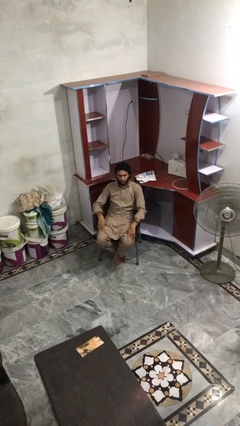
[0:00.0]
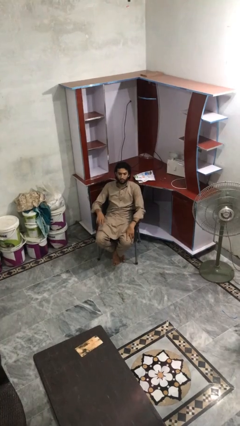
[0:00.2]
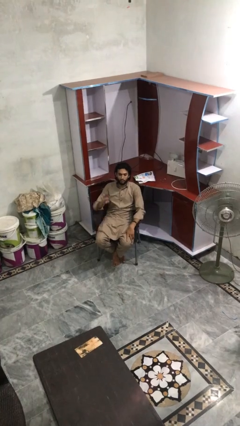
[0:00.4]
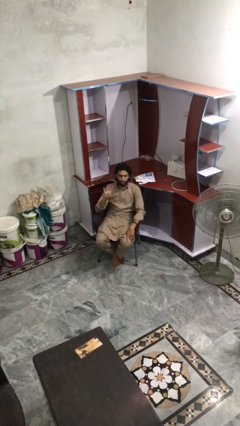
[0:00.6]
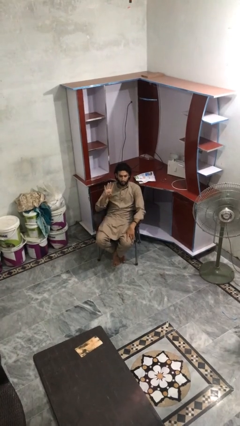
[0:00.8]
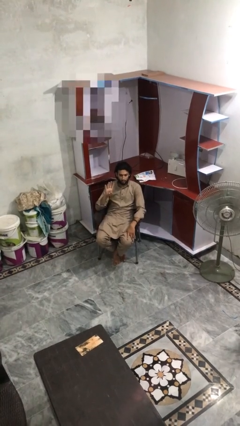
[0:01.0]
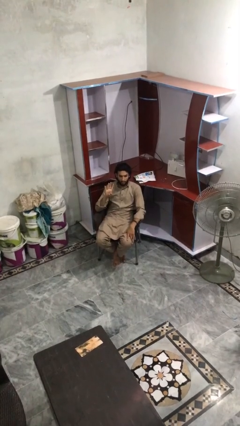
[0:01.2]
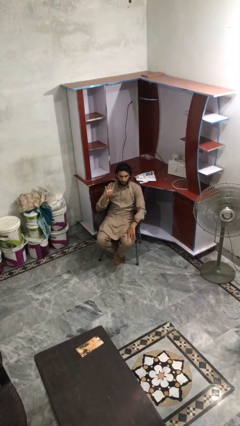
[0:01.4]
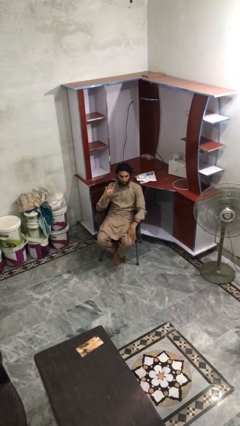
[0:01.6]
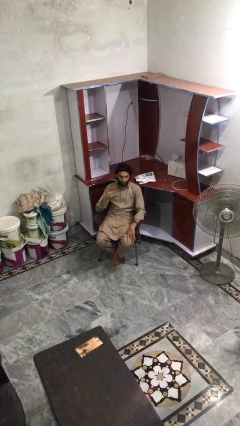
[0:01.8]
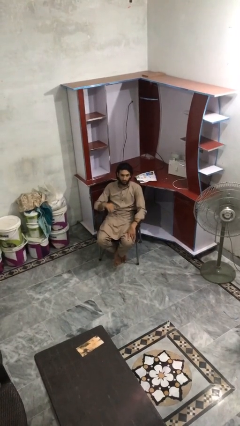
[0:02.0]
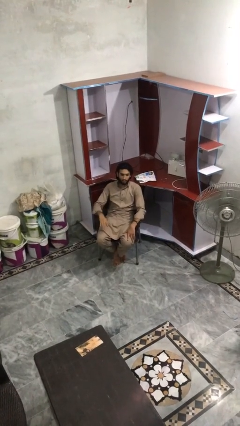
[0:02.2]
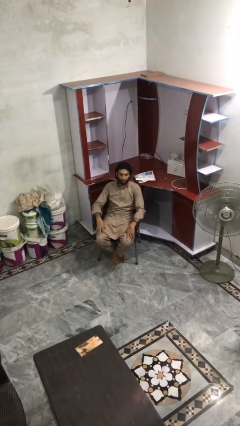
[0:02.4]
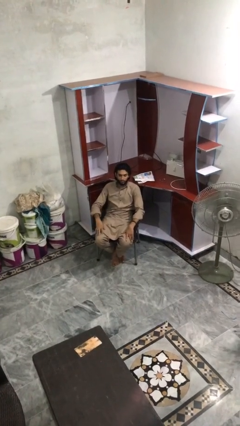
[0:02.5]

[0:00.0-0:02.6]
person gestures number four

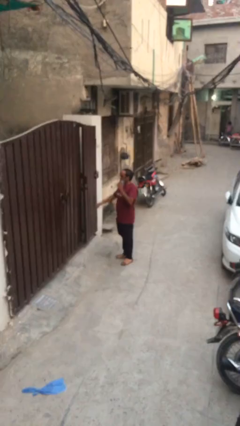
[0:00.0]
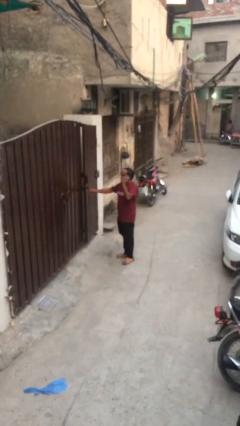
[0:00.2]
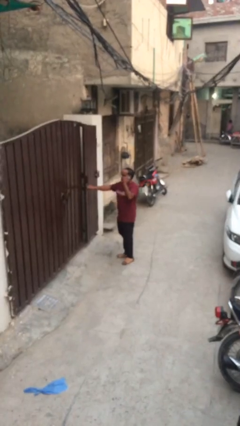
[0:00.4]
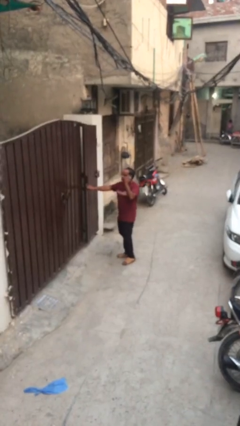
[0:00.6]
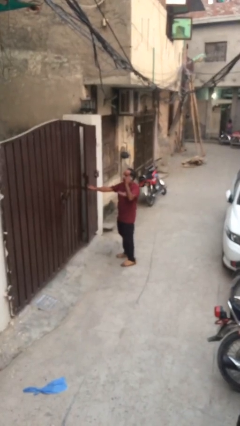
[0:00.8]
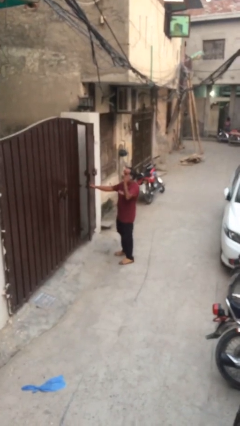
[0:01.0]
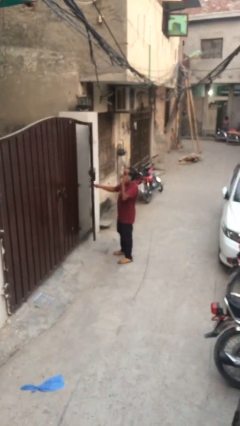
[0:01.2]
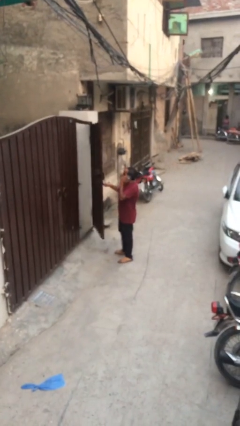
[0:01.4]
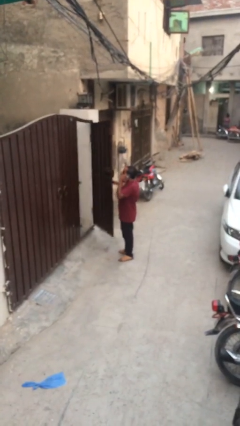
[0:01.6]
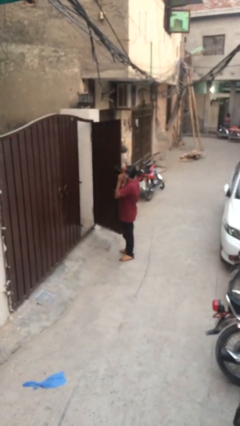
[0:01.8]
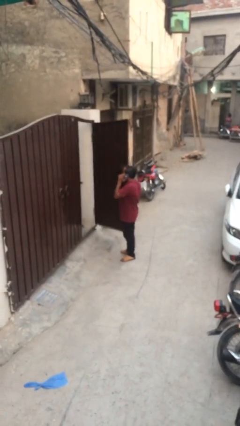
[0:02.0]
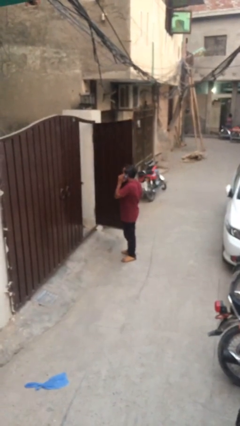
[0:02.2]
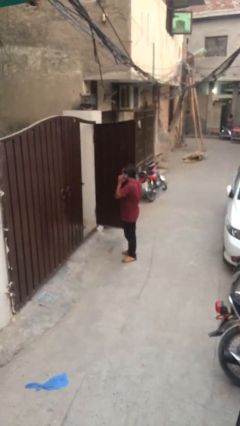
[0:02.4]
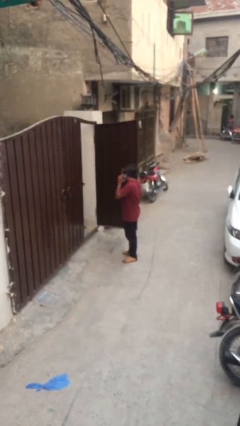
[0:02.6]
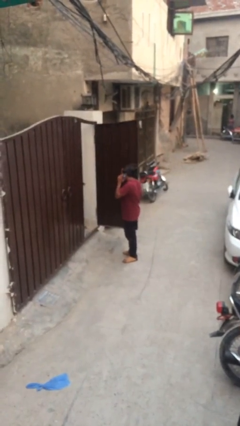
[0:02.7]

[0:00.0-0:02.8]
person opens facility door

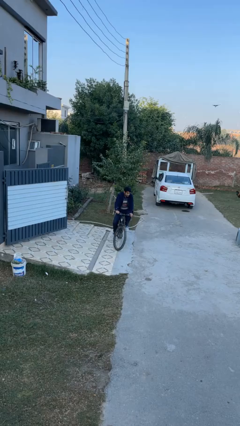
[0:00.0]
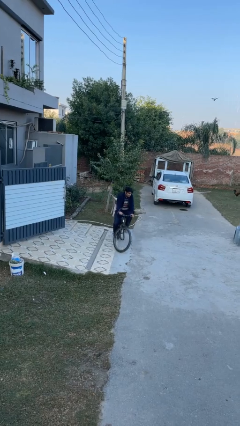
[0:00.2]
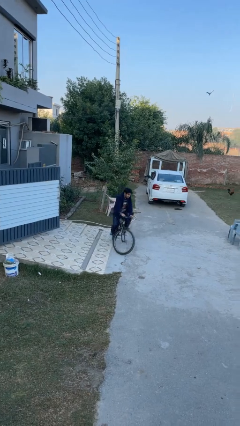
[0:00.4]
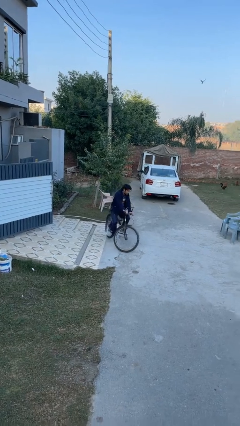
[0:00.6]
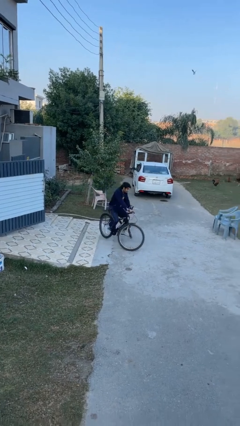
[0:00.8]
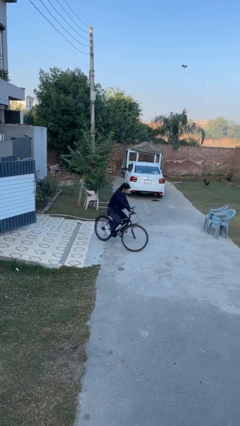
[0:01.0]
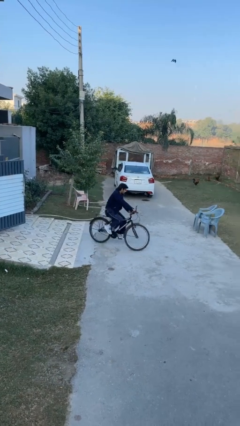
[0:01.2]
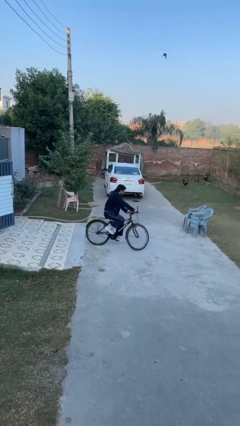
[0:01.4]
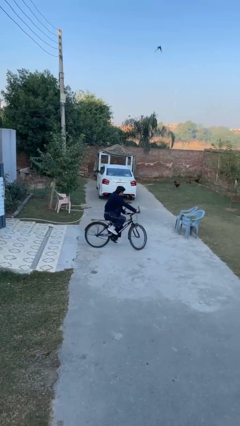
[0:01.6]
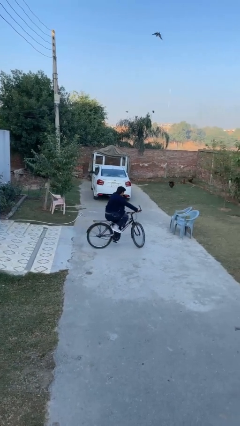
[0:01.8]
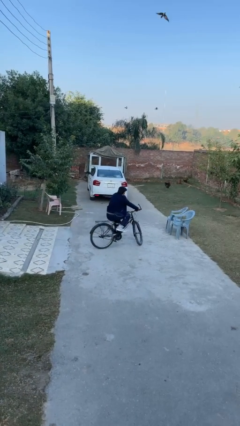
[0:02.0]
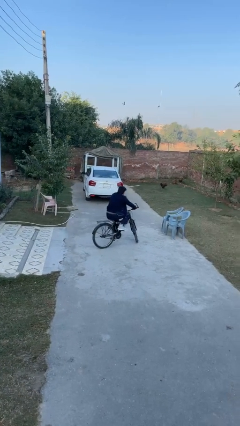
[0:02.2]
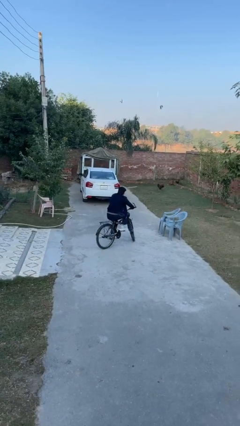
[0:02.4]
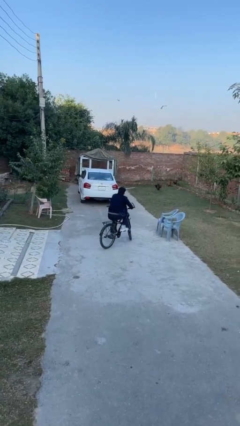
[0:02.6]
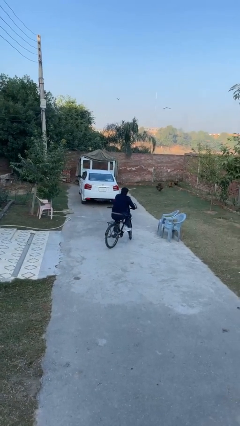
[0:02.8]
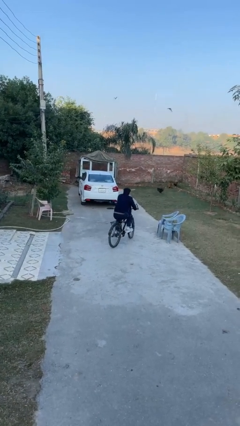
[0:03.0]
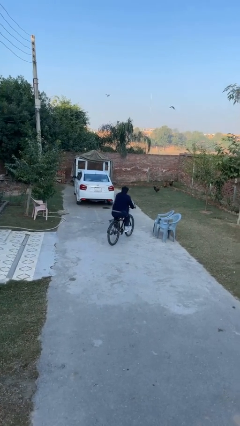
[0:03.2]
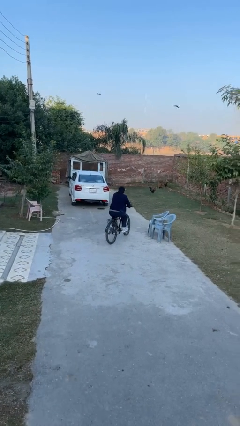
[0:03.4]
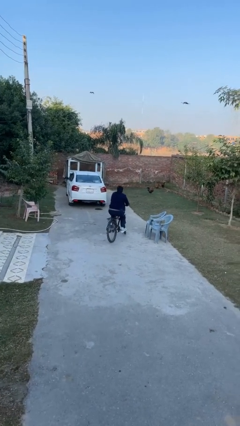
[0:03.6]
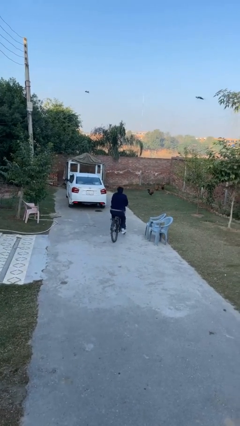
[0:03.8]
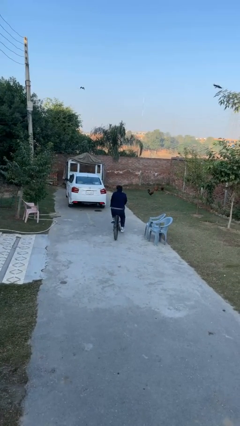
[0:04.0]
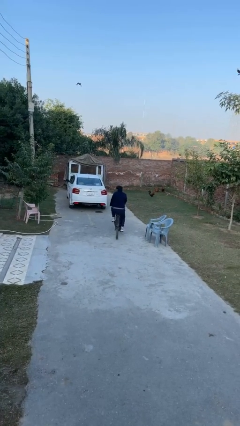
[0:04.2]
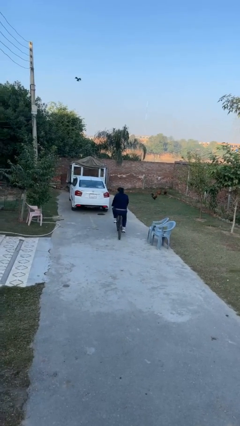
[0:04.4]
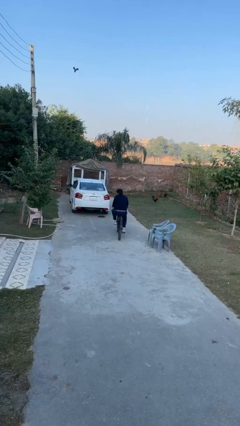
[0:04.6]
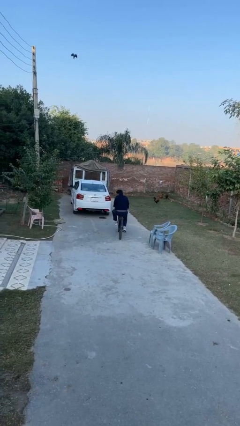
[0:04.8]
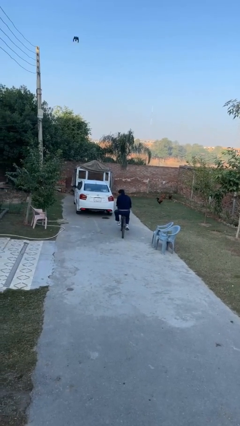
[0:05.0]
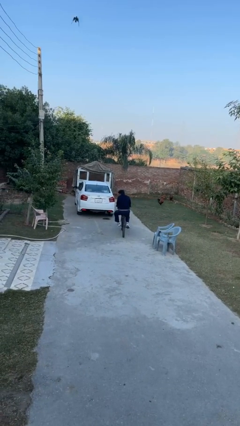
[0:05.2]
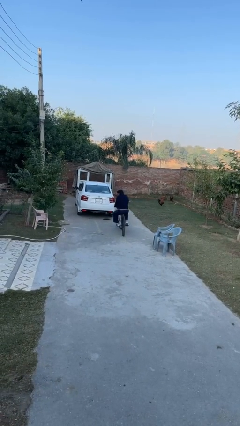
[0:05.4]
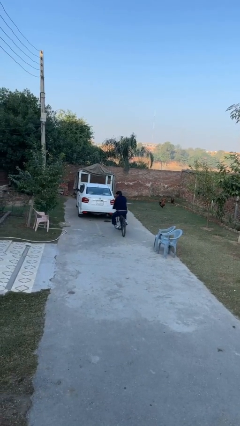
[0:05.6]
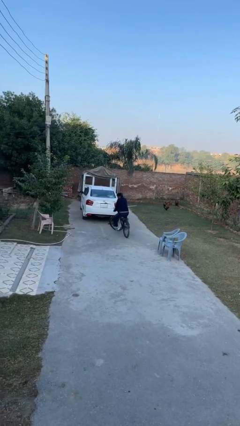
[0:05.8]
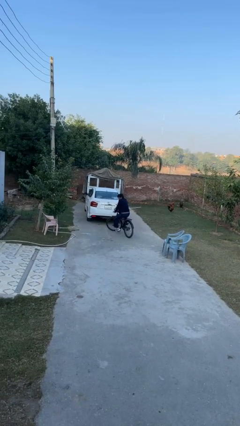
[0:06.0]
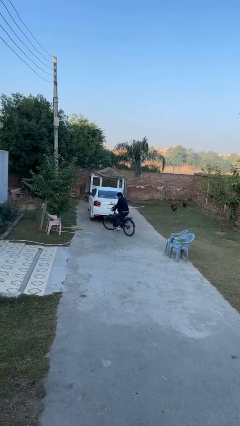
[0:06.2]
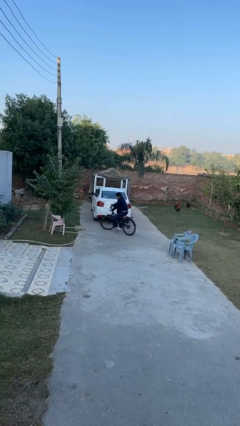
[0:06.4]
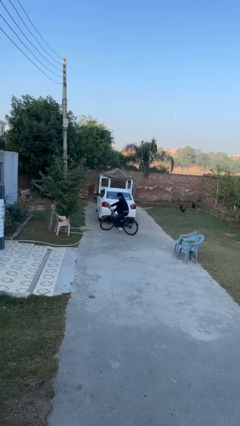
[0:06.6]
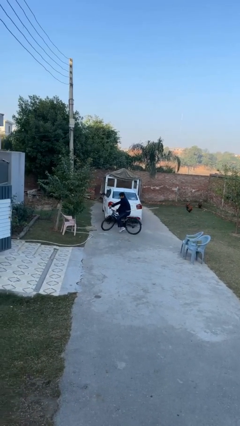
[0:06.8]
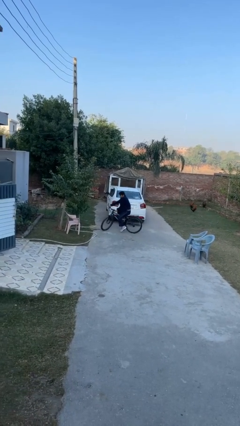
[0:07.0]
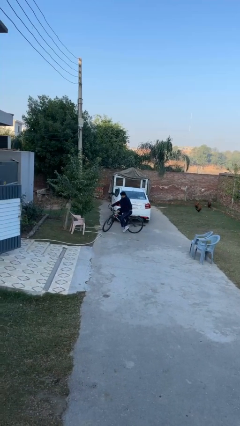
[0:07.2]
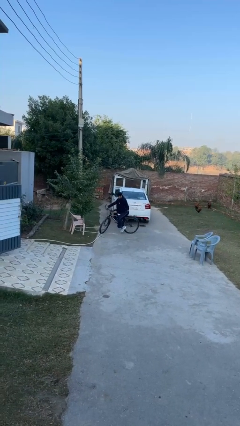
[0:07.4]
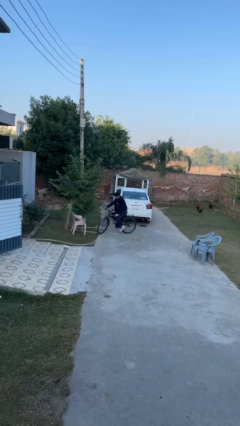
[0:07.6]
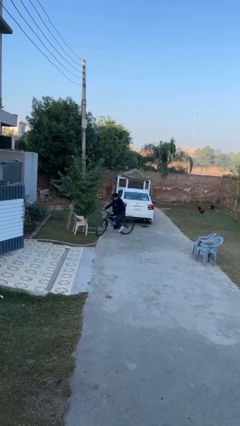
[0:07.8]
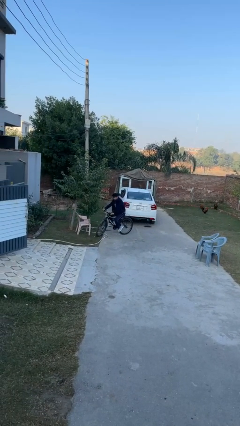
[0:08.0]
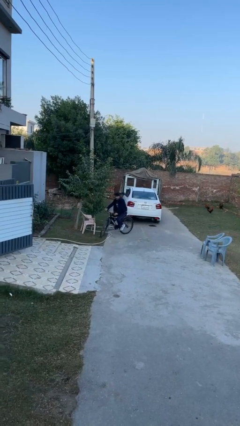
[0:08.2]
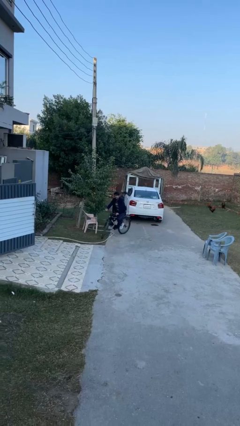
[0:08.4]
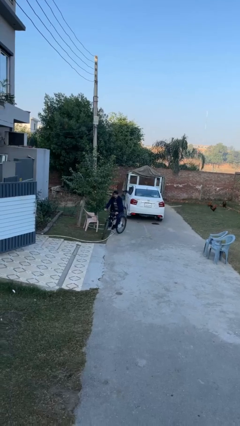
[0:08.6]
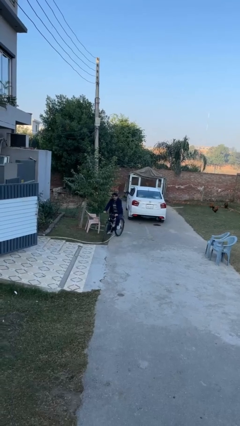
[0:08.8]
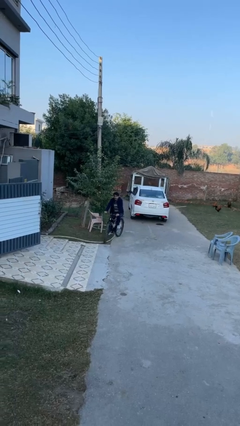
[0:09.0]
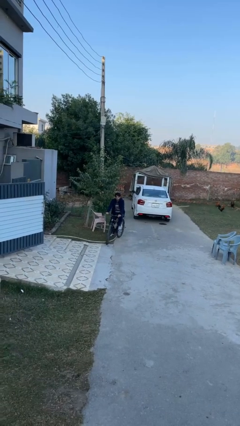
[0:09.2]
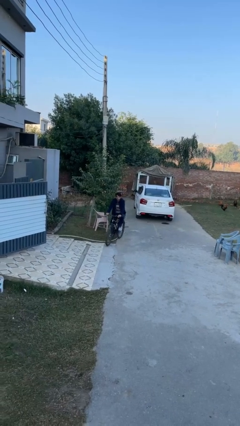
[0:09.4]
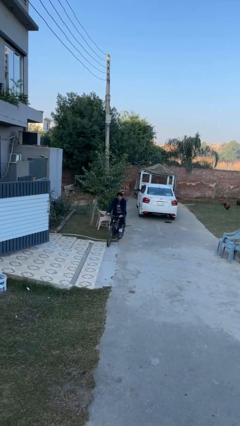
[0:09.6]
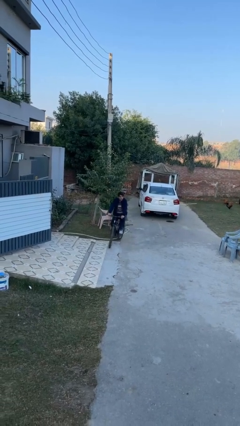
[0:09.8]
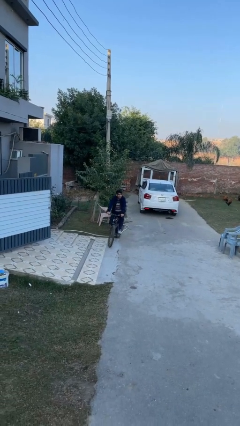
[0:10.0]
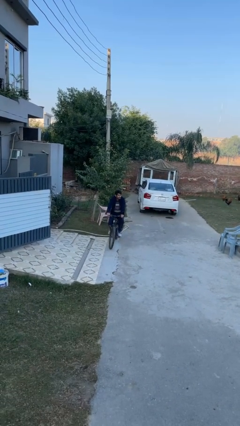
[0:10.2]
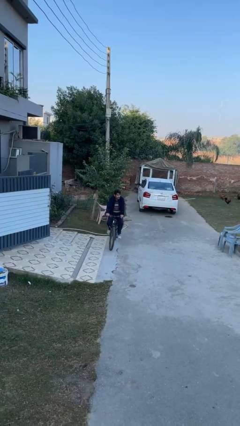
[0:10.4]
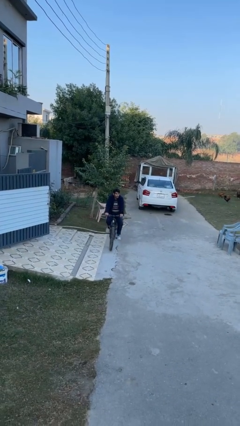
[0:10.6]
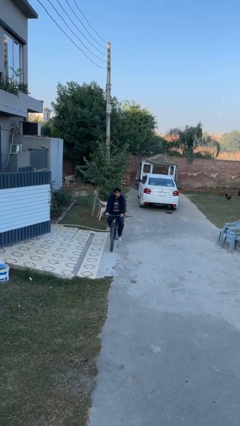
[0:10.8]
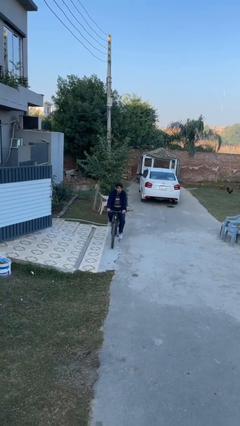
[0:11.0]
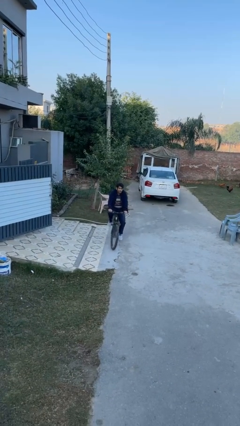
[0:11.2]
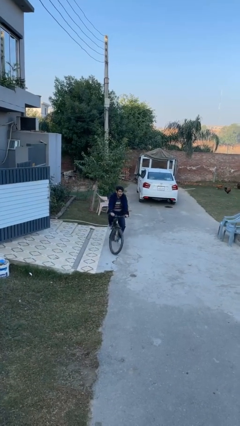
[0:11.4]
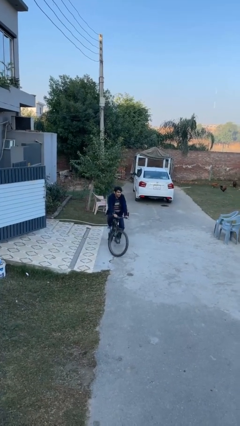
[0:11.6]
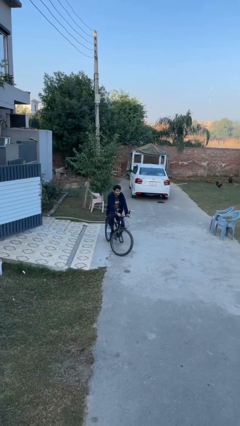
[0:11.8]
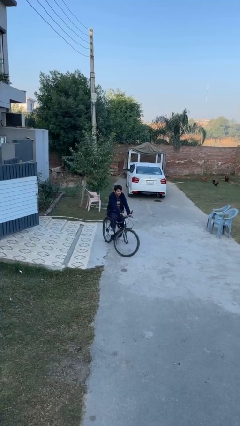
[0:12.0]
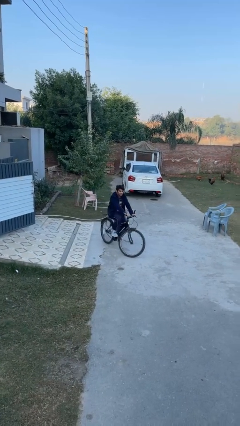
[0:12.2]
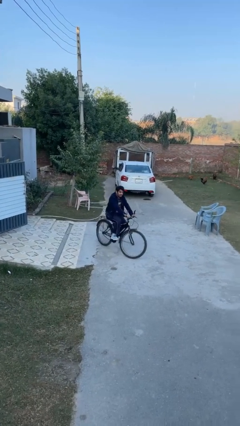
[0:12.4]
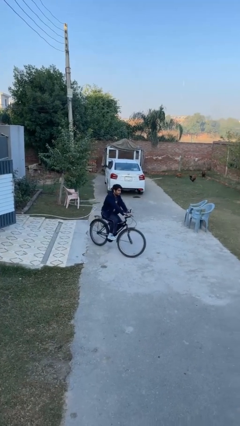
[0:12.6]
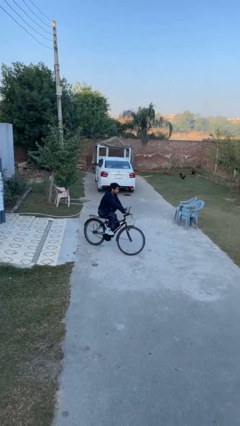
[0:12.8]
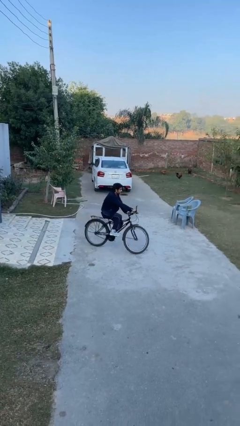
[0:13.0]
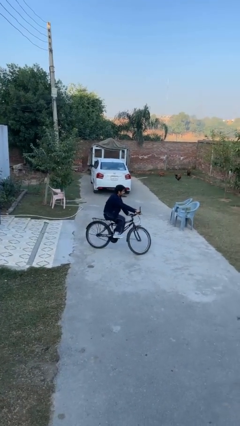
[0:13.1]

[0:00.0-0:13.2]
person rides bicycle
